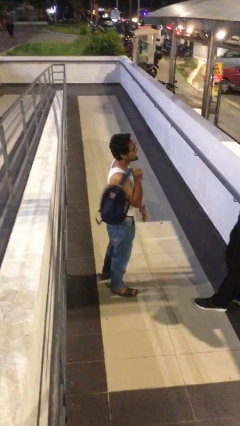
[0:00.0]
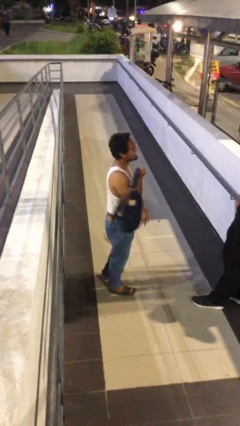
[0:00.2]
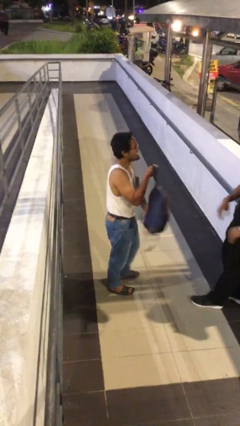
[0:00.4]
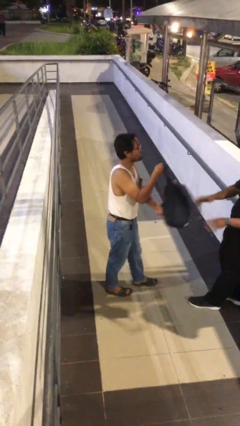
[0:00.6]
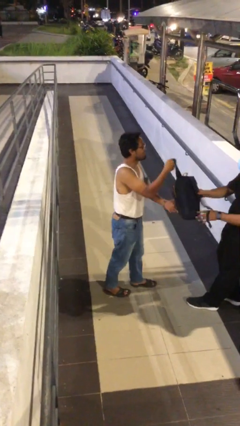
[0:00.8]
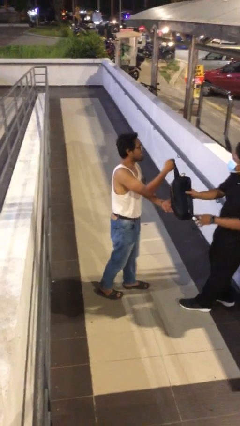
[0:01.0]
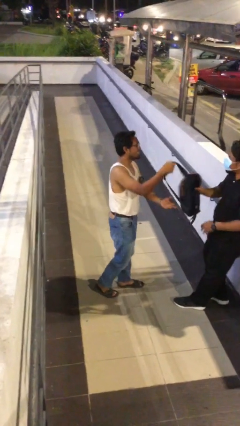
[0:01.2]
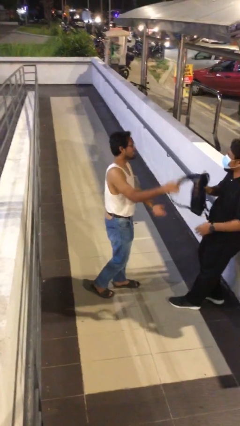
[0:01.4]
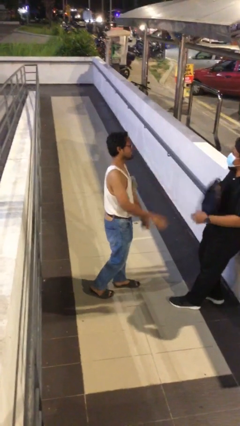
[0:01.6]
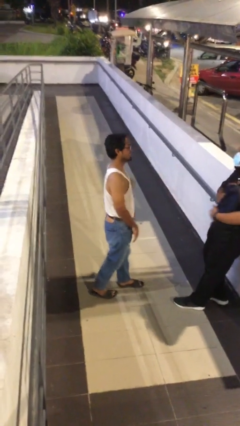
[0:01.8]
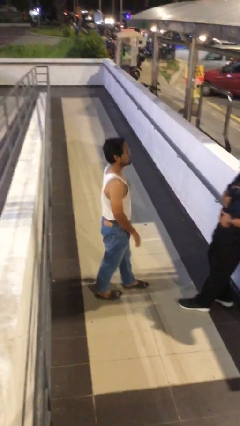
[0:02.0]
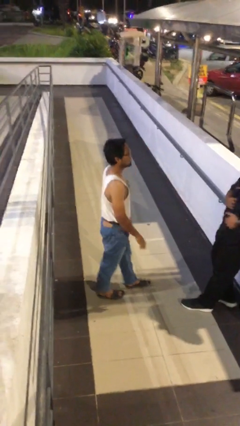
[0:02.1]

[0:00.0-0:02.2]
person transfers object to person

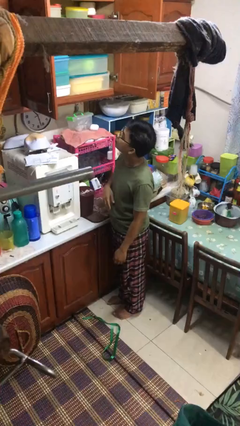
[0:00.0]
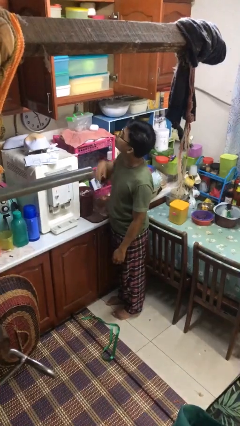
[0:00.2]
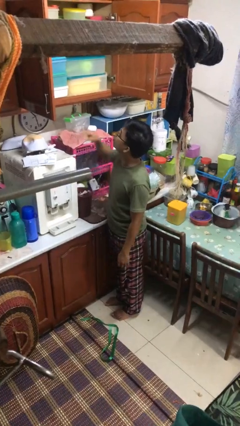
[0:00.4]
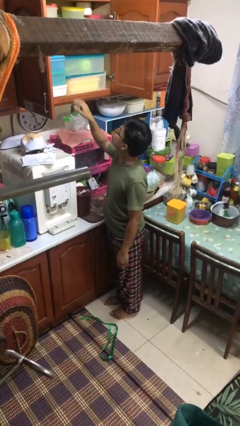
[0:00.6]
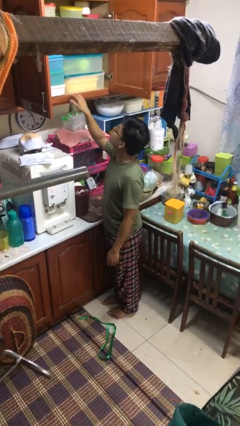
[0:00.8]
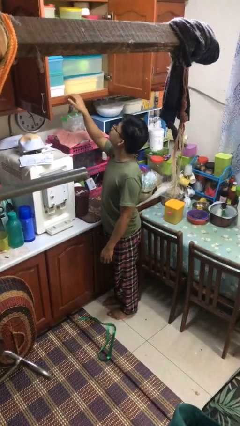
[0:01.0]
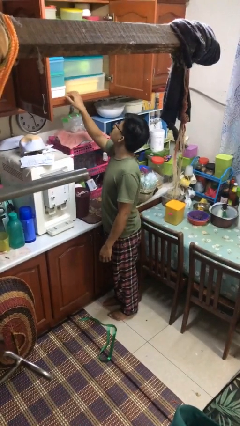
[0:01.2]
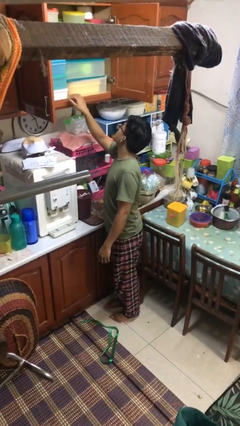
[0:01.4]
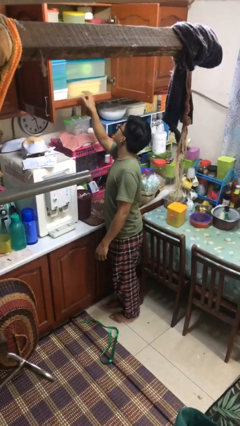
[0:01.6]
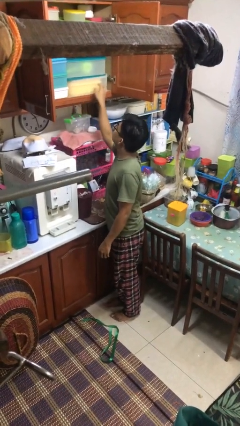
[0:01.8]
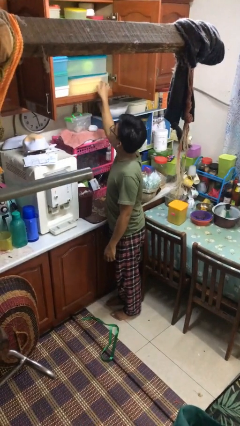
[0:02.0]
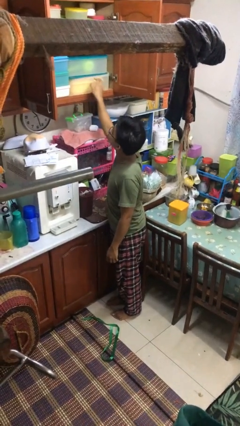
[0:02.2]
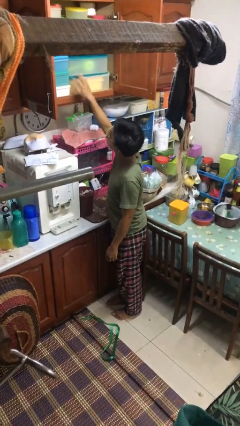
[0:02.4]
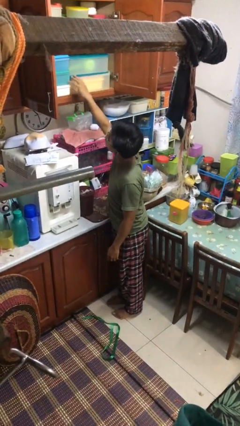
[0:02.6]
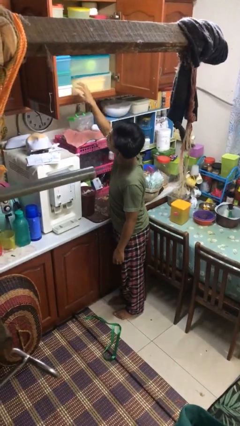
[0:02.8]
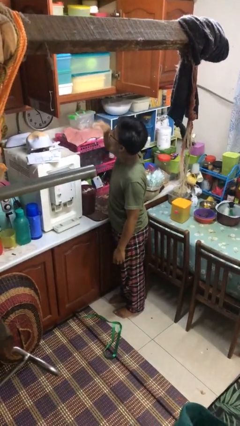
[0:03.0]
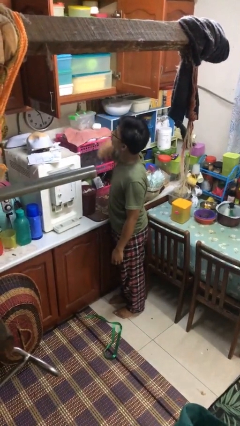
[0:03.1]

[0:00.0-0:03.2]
person searches in kitchen drawer

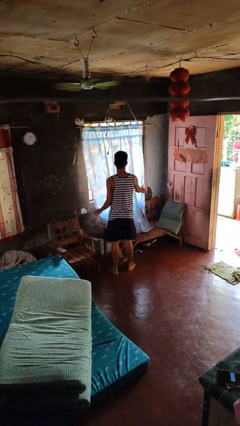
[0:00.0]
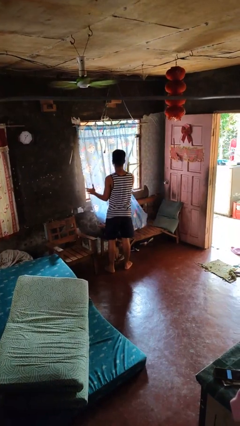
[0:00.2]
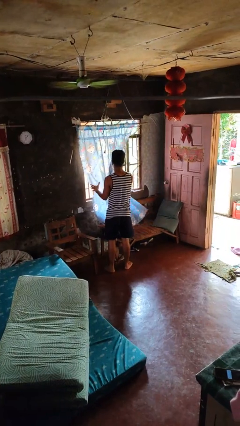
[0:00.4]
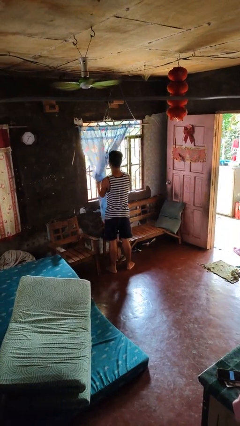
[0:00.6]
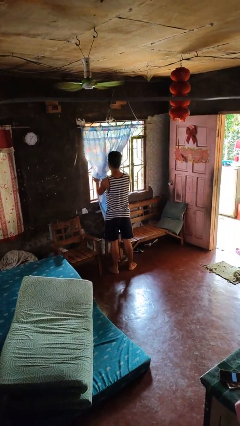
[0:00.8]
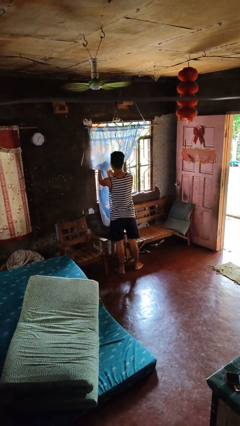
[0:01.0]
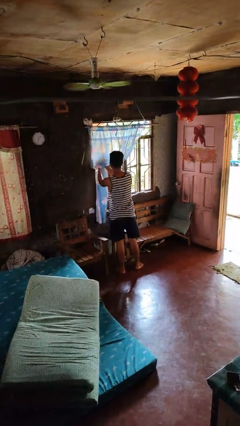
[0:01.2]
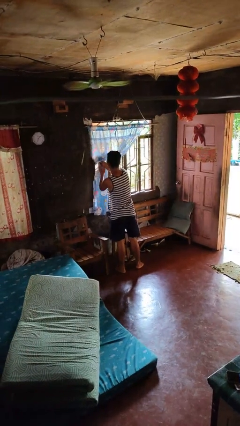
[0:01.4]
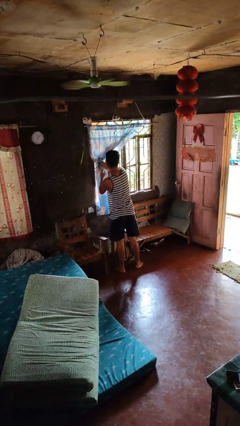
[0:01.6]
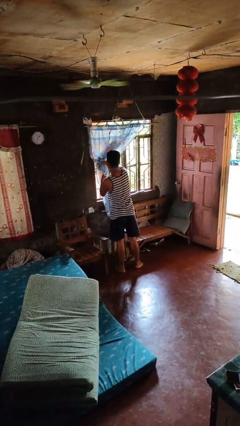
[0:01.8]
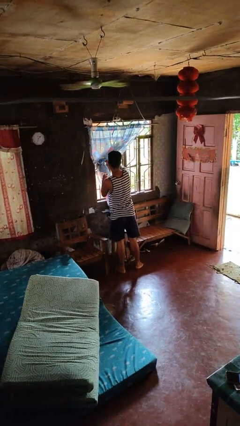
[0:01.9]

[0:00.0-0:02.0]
person opens curtains

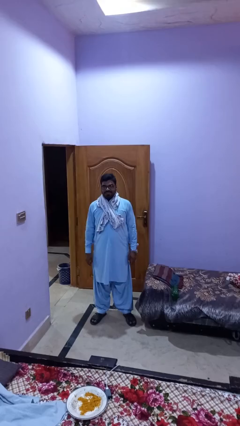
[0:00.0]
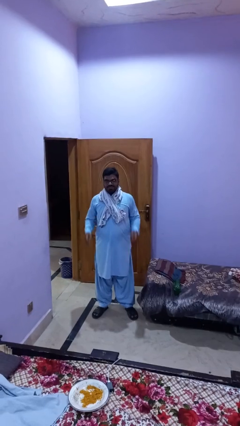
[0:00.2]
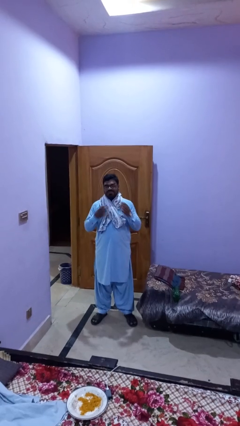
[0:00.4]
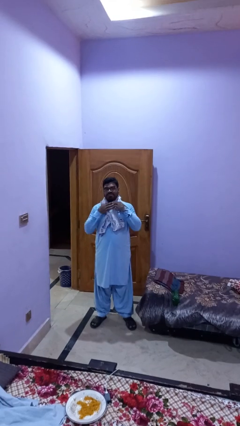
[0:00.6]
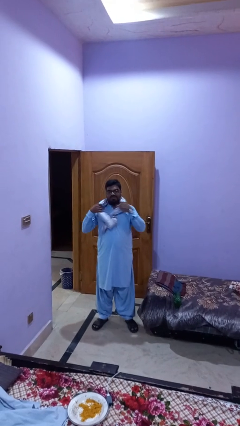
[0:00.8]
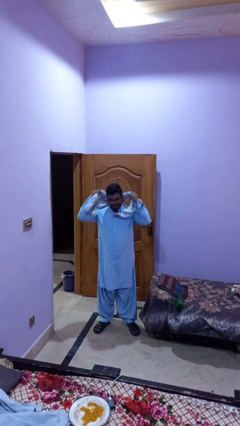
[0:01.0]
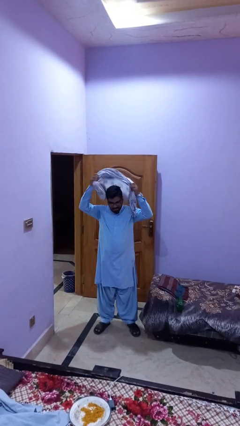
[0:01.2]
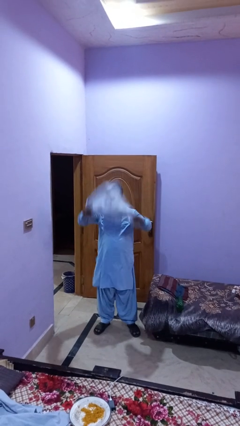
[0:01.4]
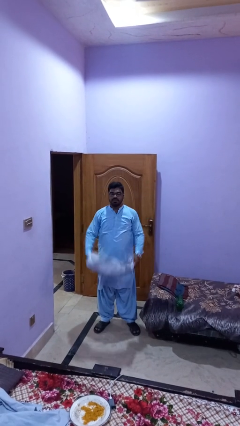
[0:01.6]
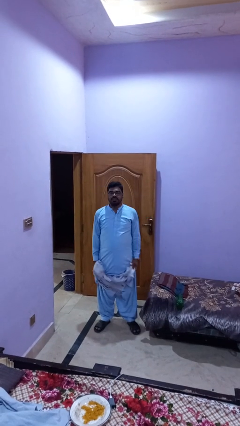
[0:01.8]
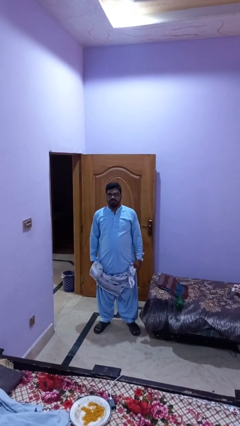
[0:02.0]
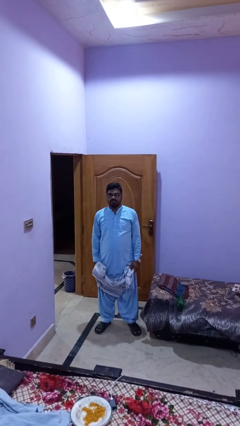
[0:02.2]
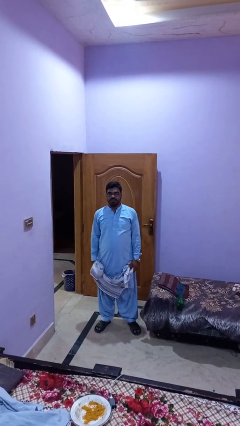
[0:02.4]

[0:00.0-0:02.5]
person takes off scarf

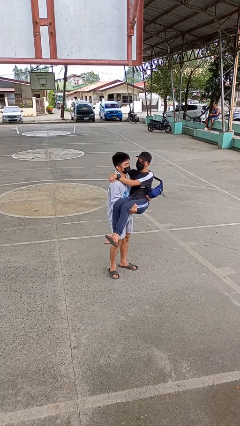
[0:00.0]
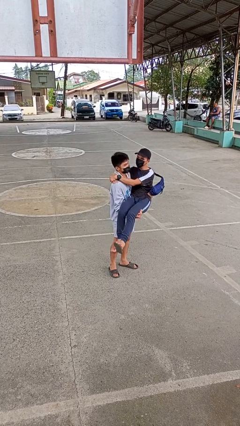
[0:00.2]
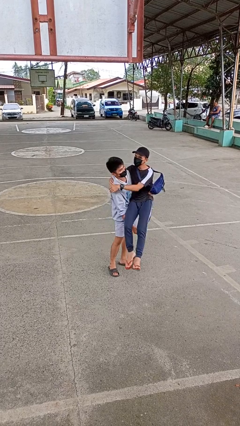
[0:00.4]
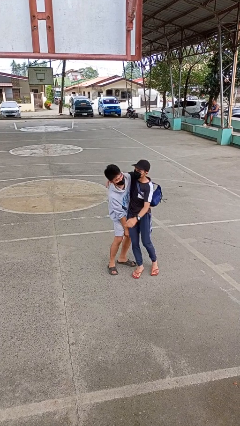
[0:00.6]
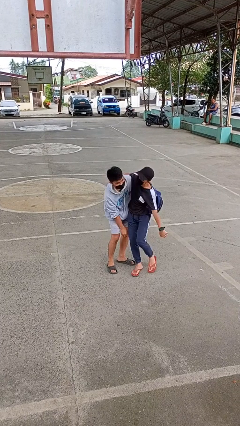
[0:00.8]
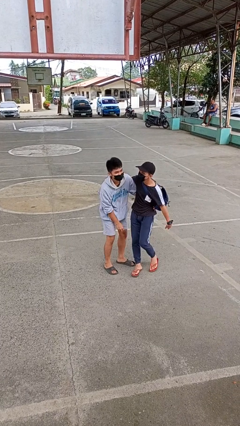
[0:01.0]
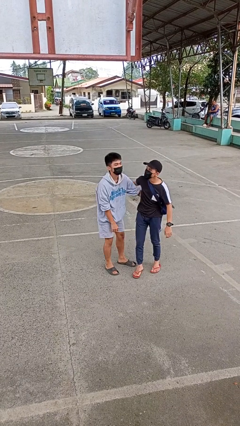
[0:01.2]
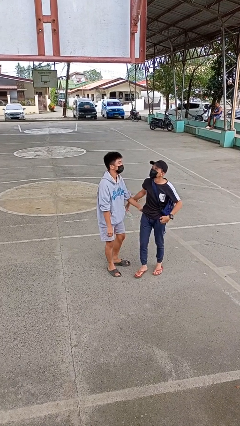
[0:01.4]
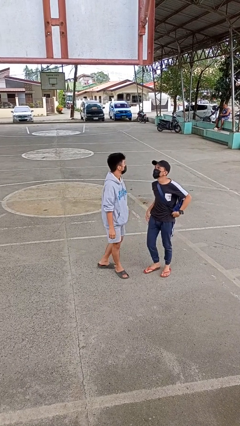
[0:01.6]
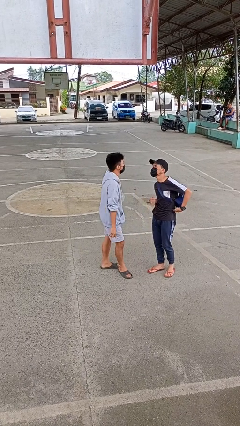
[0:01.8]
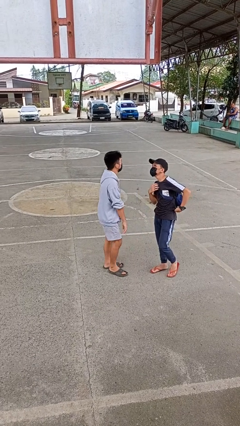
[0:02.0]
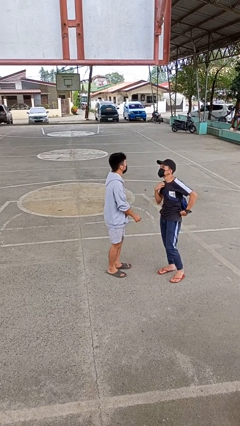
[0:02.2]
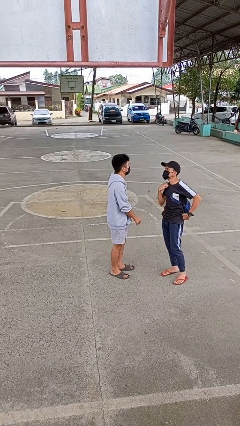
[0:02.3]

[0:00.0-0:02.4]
person puts down person

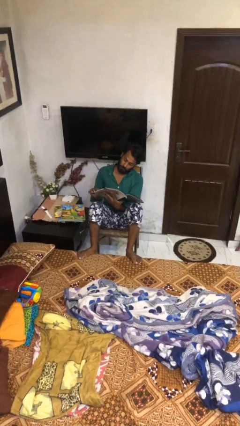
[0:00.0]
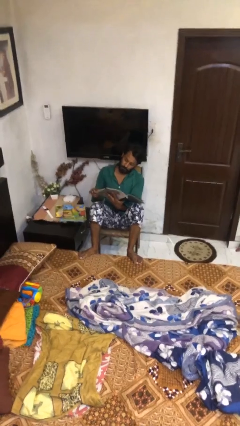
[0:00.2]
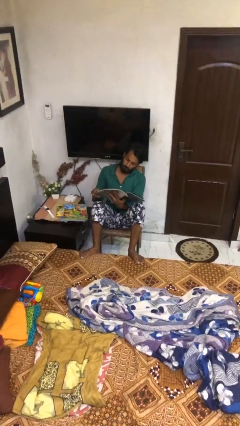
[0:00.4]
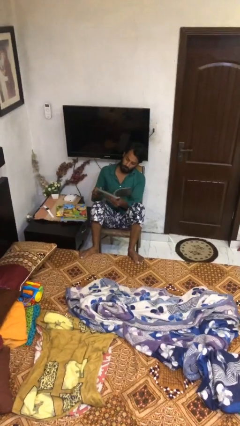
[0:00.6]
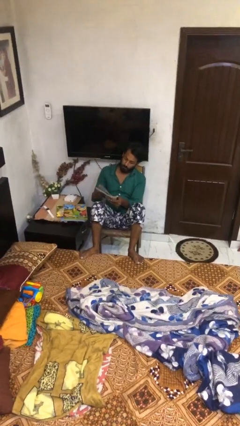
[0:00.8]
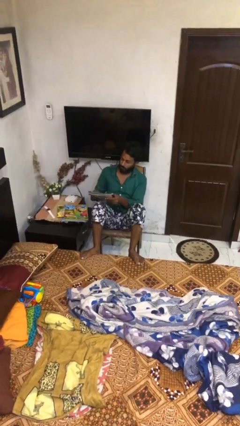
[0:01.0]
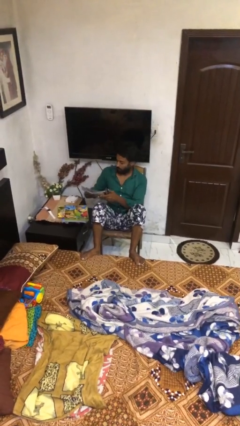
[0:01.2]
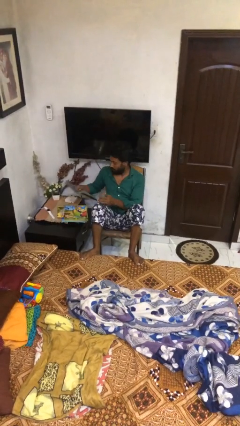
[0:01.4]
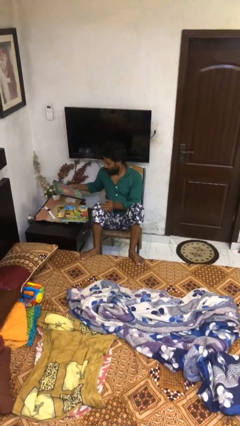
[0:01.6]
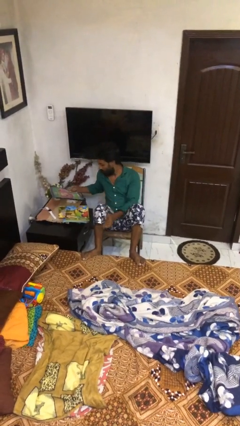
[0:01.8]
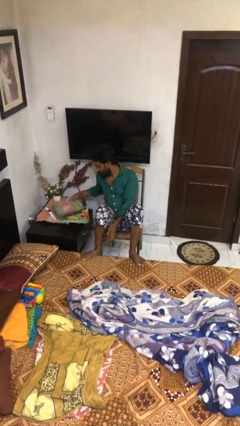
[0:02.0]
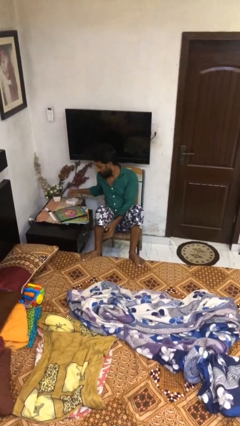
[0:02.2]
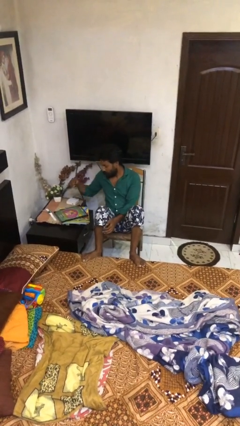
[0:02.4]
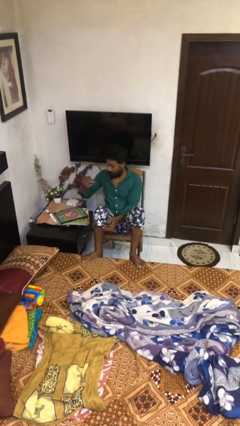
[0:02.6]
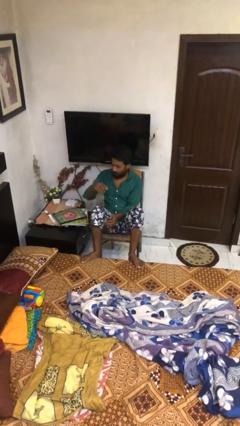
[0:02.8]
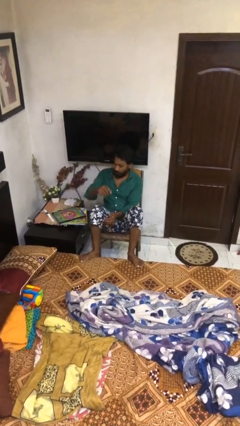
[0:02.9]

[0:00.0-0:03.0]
person puts down object on table

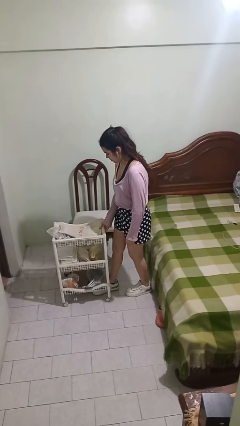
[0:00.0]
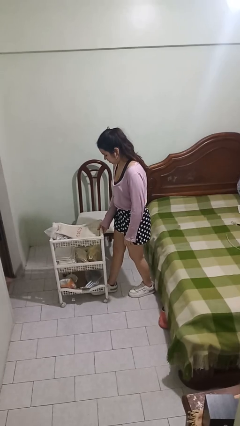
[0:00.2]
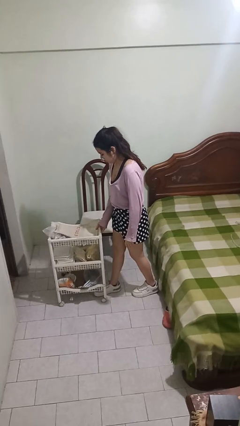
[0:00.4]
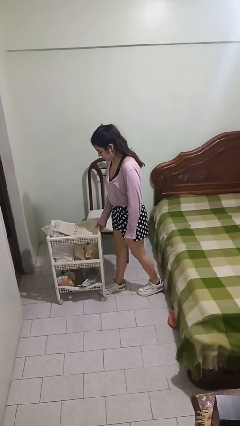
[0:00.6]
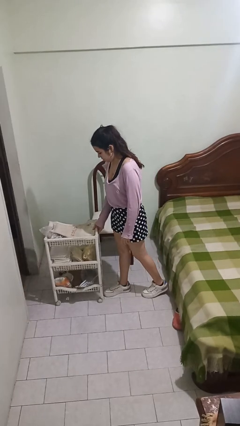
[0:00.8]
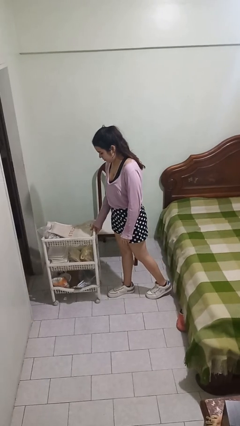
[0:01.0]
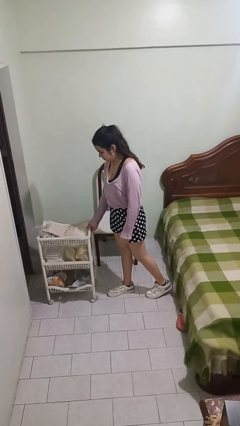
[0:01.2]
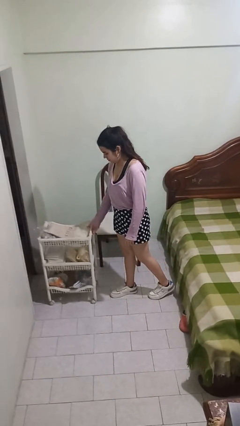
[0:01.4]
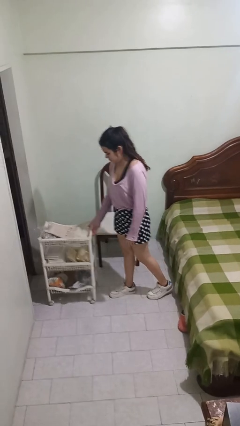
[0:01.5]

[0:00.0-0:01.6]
person pushes wheeled cart

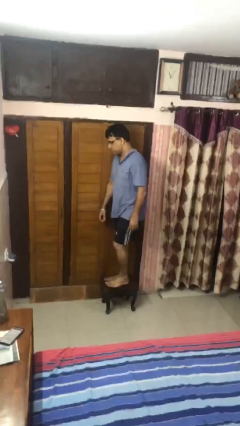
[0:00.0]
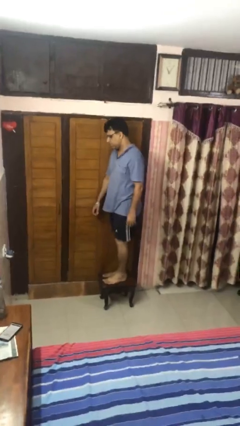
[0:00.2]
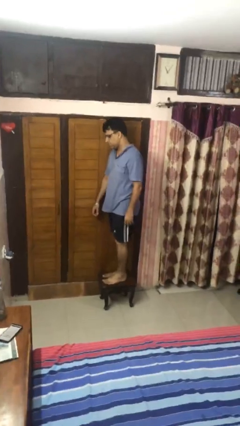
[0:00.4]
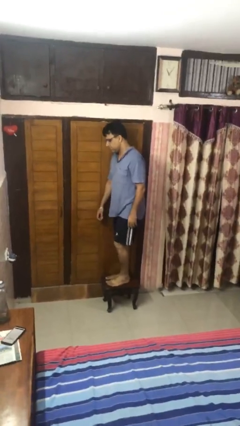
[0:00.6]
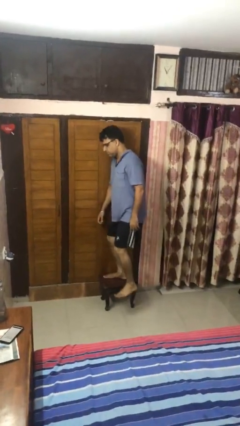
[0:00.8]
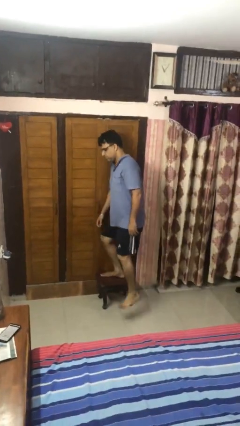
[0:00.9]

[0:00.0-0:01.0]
person climbs off table
